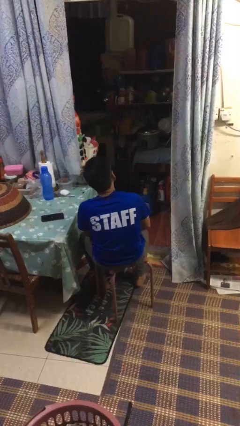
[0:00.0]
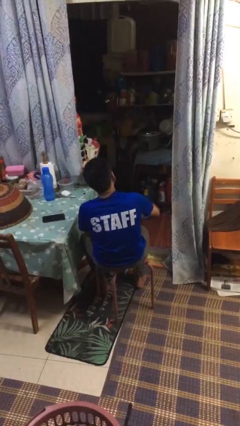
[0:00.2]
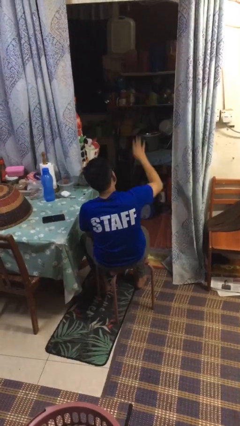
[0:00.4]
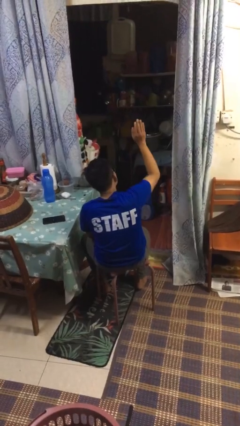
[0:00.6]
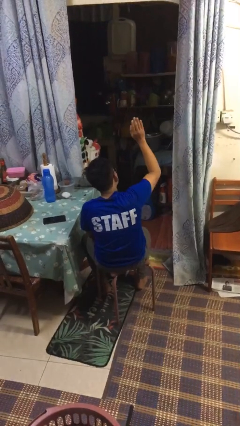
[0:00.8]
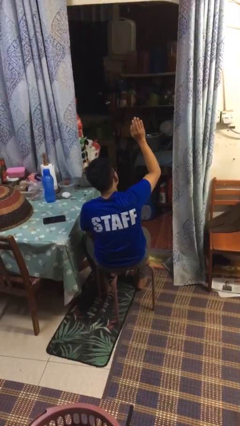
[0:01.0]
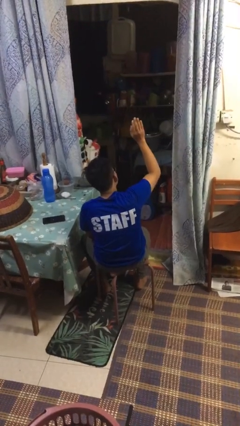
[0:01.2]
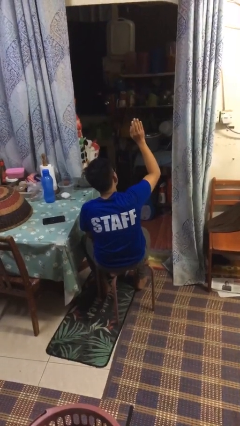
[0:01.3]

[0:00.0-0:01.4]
person gestures swipe up

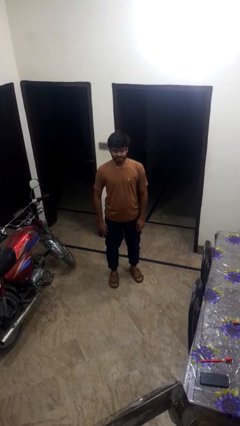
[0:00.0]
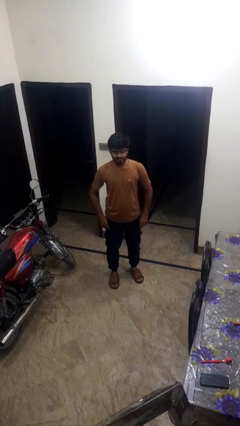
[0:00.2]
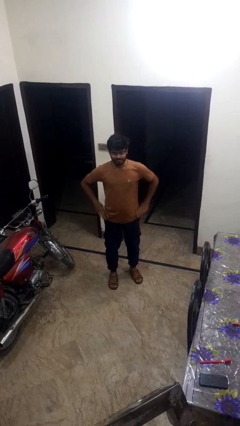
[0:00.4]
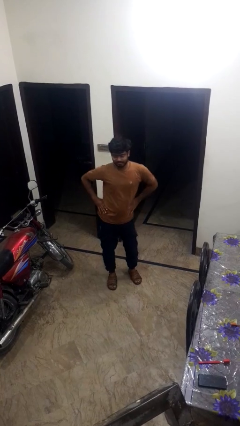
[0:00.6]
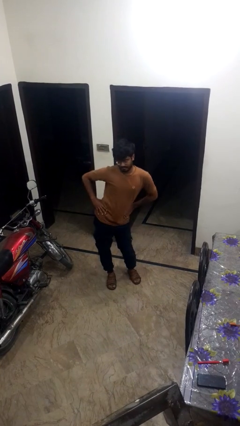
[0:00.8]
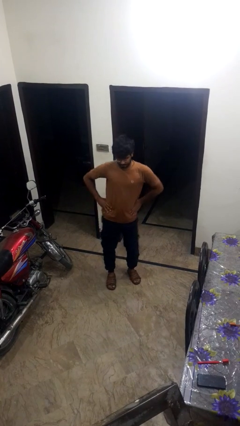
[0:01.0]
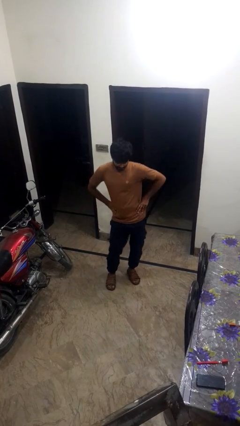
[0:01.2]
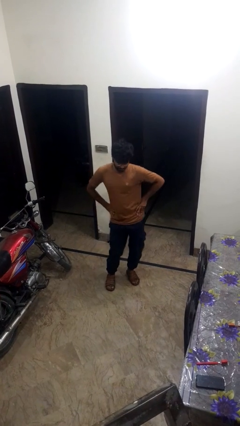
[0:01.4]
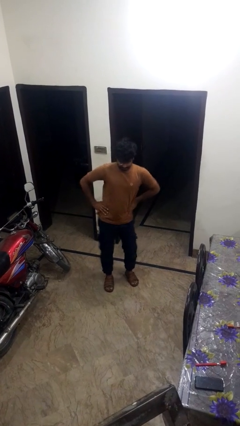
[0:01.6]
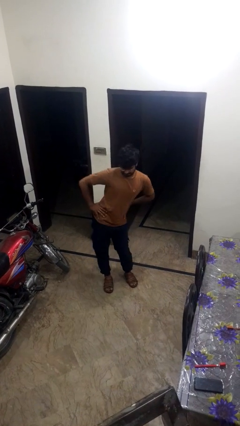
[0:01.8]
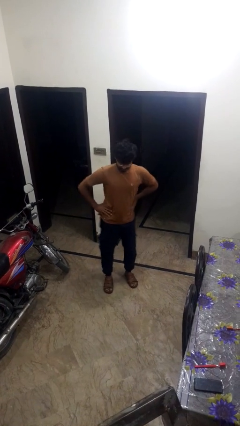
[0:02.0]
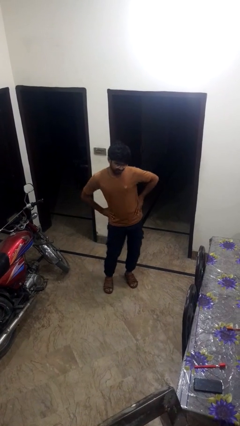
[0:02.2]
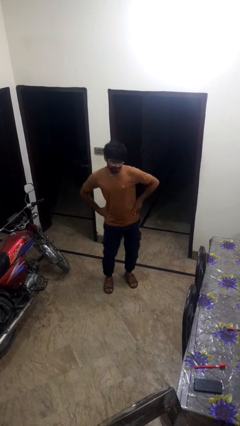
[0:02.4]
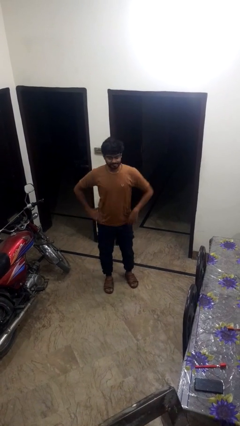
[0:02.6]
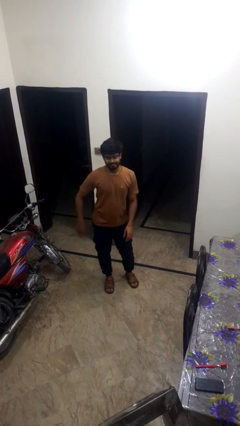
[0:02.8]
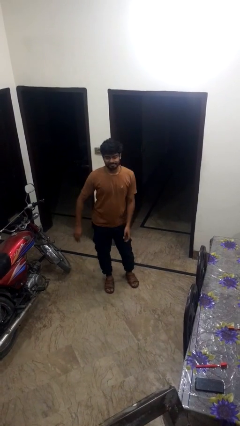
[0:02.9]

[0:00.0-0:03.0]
person wiggles hips

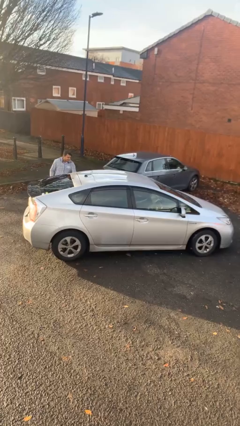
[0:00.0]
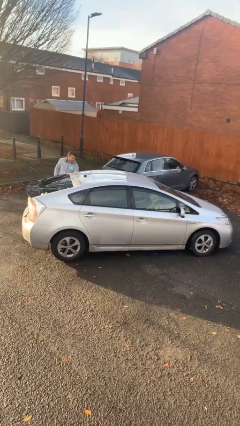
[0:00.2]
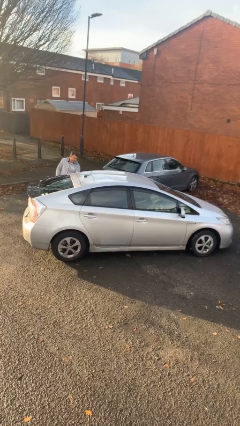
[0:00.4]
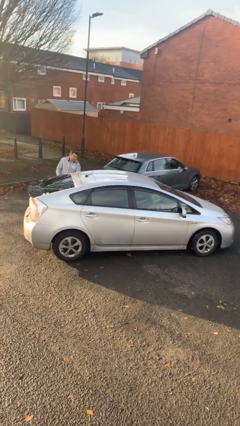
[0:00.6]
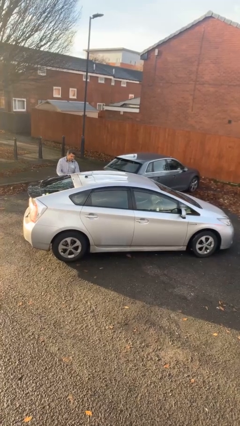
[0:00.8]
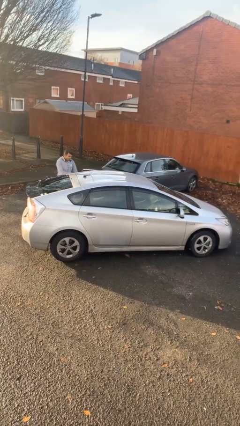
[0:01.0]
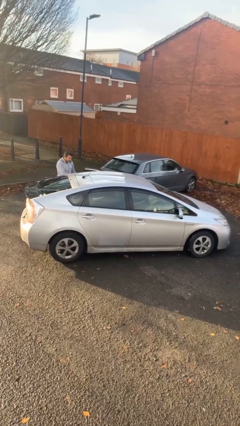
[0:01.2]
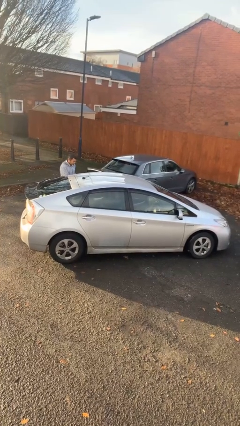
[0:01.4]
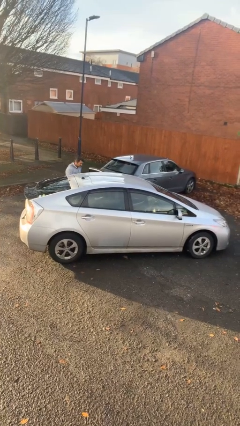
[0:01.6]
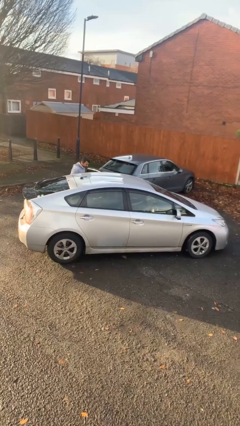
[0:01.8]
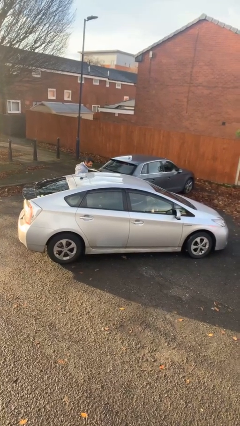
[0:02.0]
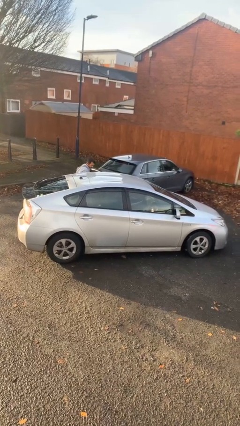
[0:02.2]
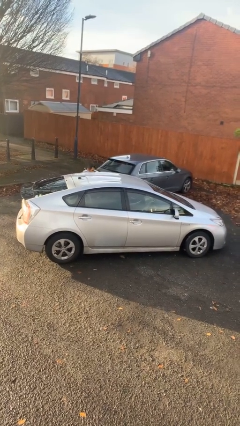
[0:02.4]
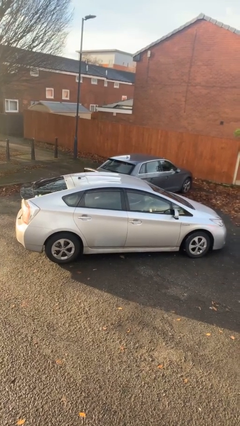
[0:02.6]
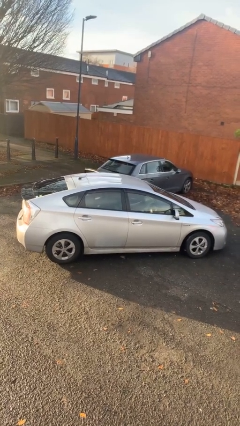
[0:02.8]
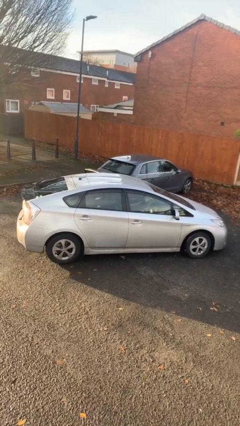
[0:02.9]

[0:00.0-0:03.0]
car picks up person

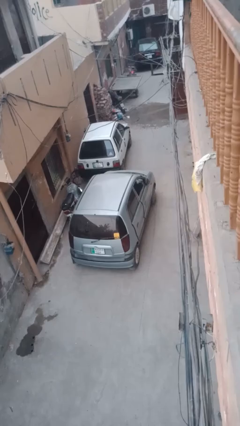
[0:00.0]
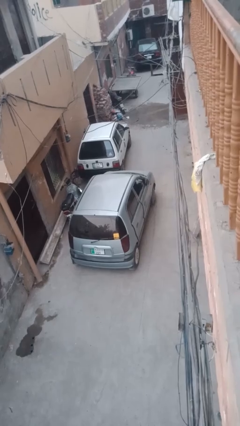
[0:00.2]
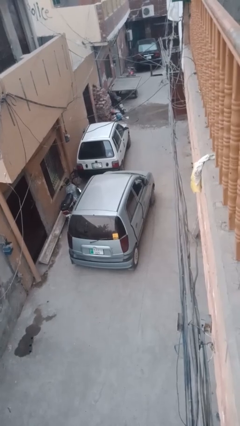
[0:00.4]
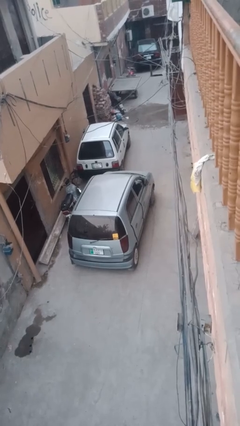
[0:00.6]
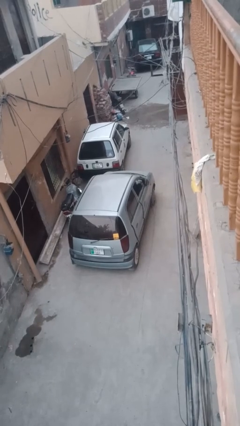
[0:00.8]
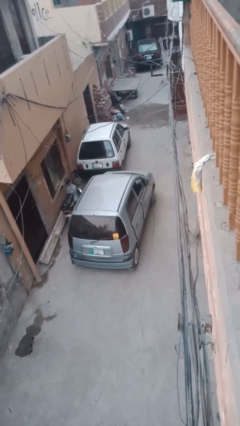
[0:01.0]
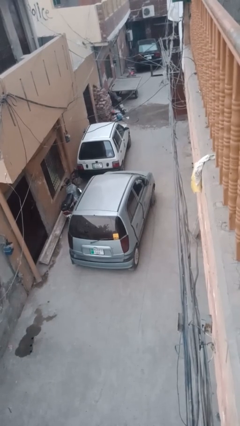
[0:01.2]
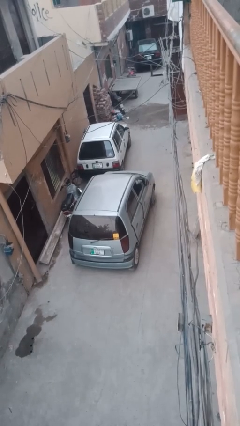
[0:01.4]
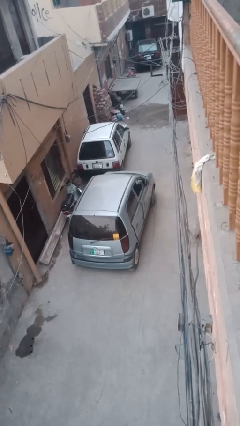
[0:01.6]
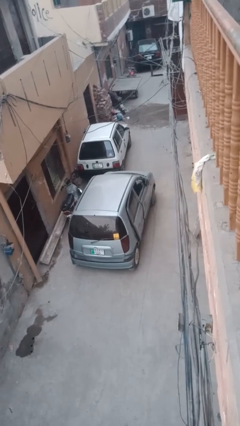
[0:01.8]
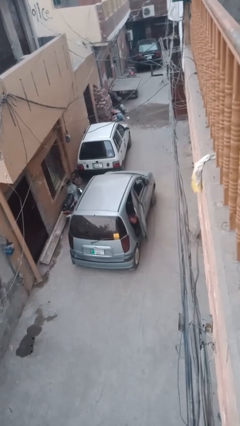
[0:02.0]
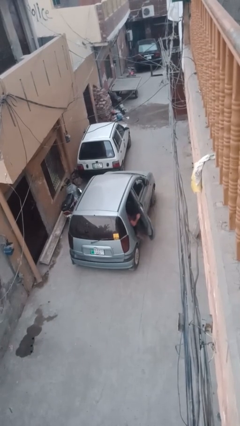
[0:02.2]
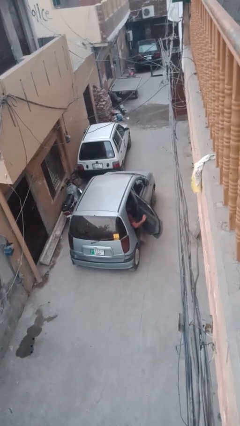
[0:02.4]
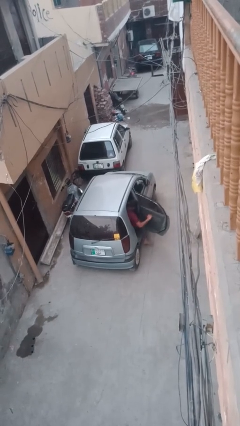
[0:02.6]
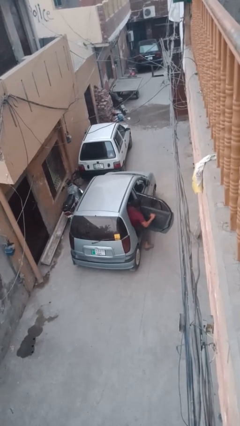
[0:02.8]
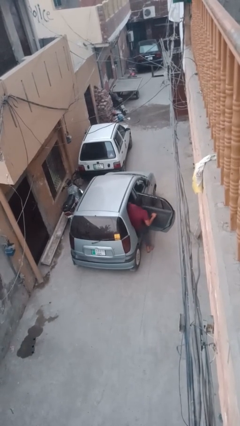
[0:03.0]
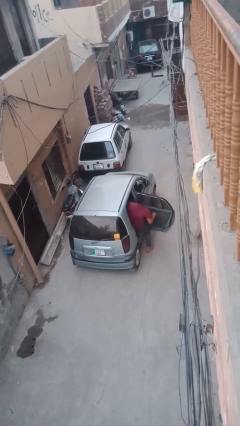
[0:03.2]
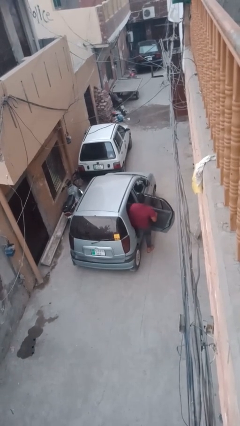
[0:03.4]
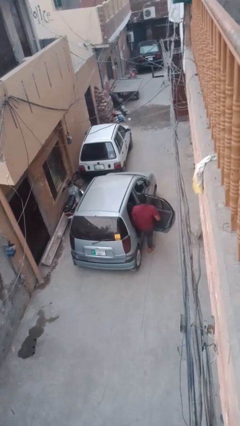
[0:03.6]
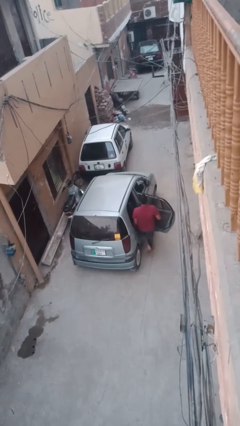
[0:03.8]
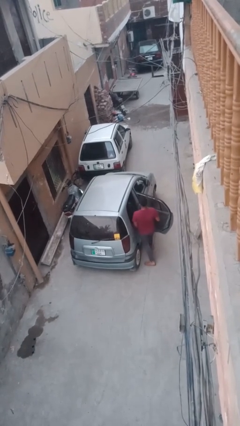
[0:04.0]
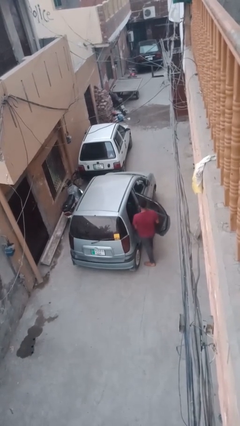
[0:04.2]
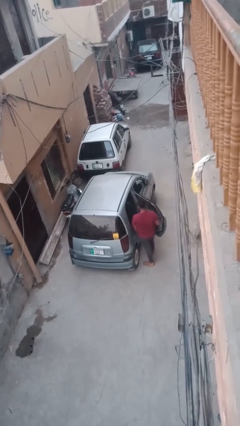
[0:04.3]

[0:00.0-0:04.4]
car drops off person

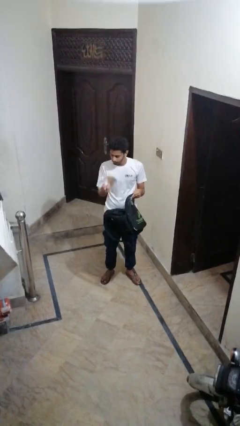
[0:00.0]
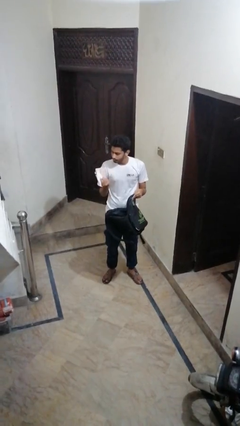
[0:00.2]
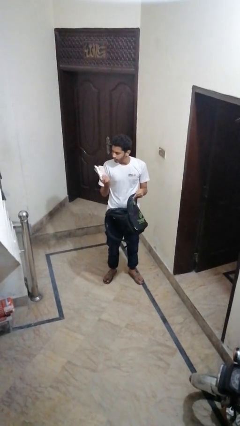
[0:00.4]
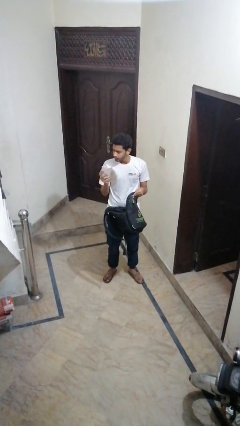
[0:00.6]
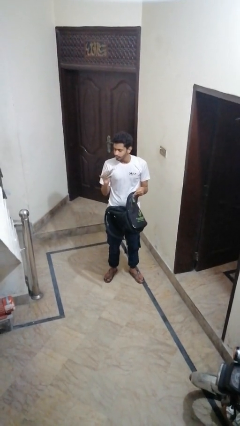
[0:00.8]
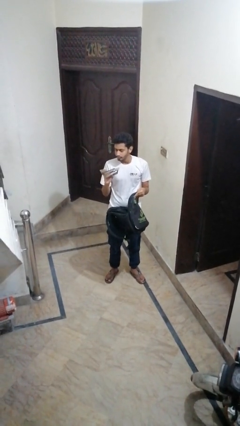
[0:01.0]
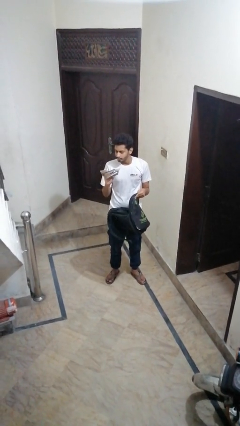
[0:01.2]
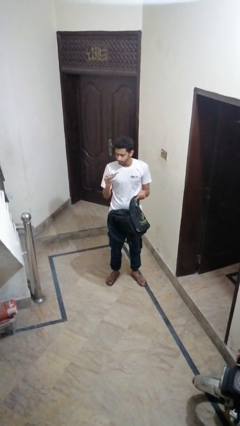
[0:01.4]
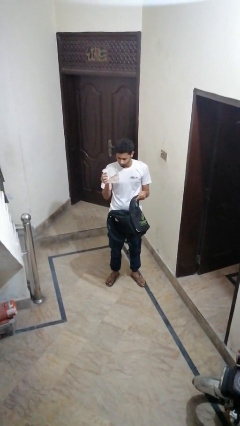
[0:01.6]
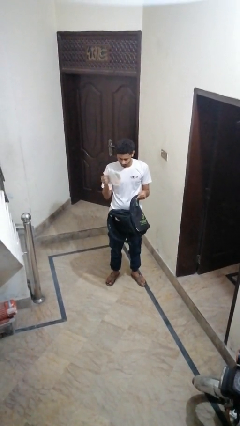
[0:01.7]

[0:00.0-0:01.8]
person takes object from backpack

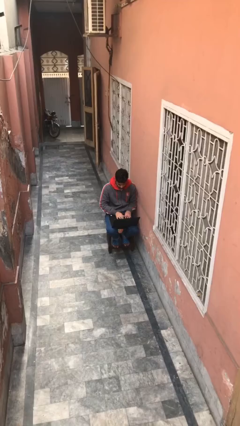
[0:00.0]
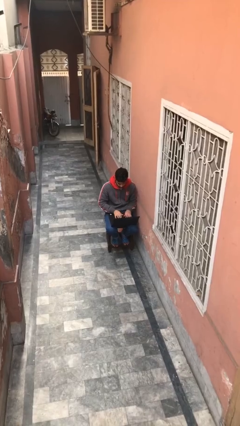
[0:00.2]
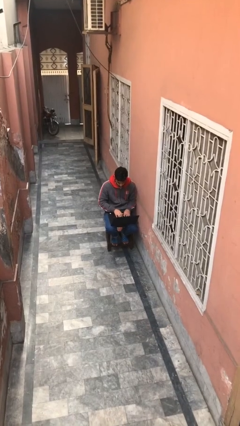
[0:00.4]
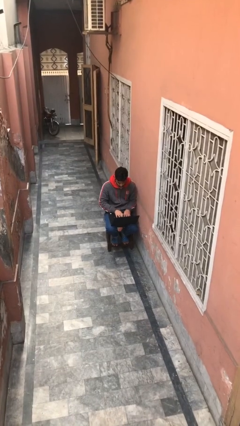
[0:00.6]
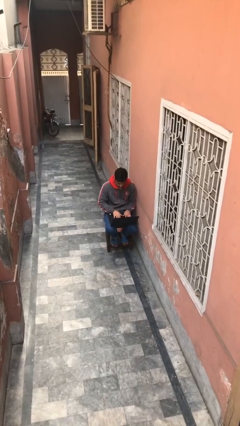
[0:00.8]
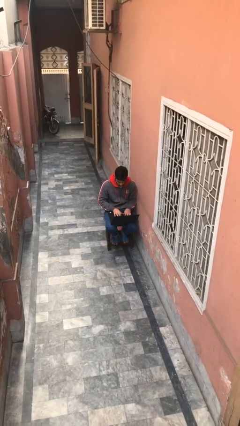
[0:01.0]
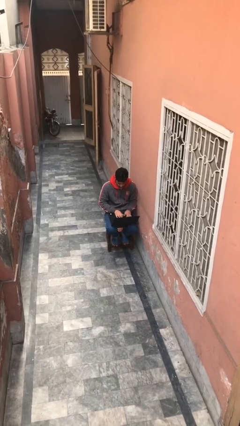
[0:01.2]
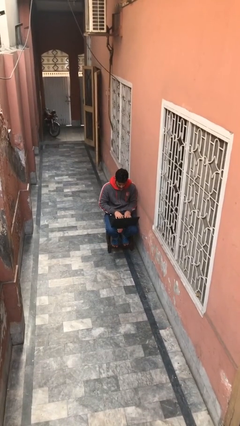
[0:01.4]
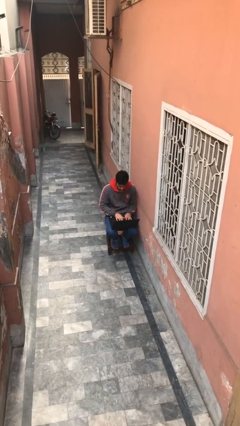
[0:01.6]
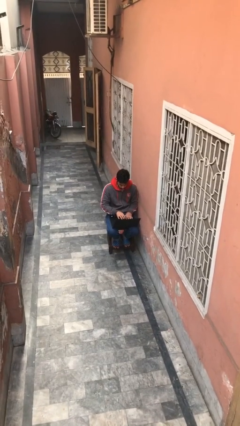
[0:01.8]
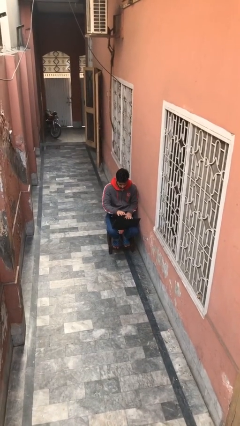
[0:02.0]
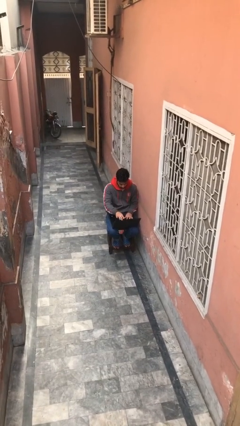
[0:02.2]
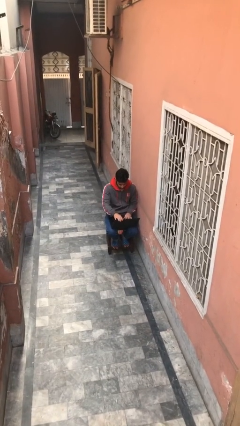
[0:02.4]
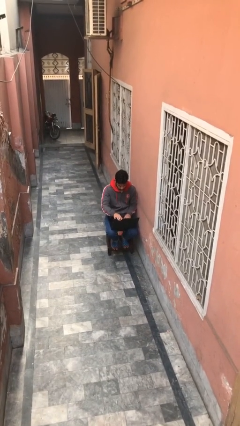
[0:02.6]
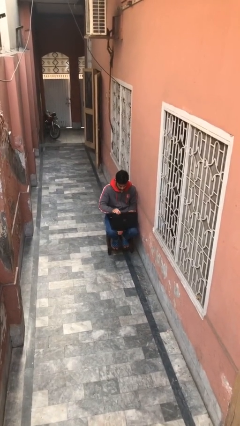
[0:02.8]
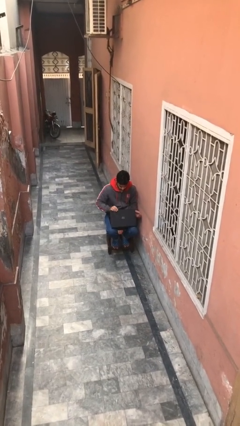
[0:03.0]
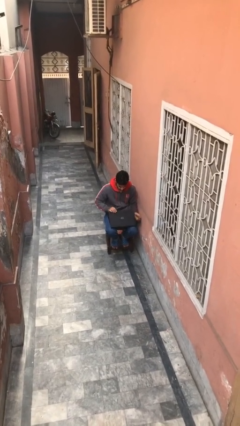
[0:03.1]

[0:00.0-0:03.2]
person interacts with laptop

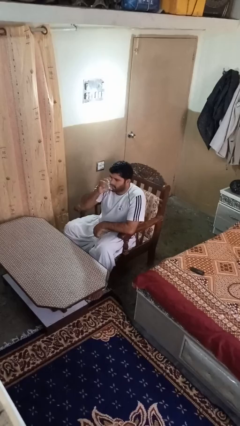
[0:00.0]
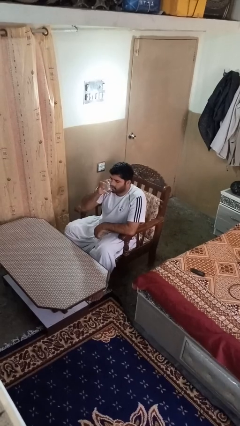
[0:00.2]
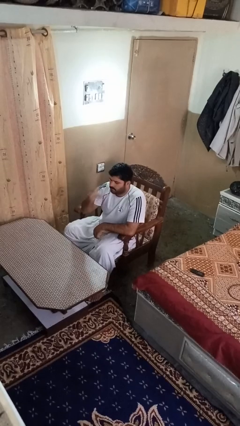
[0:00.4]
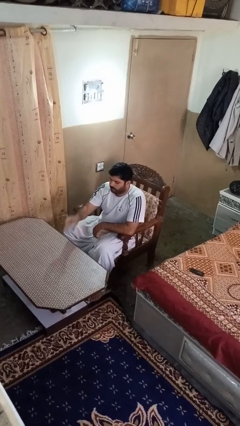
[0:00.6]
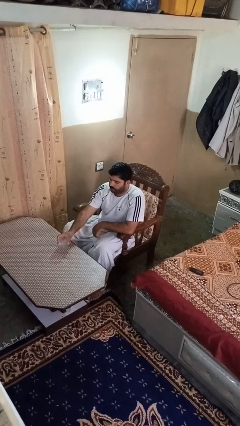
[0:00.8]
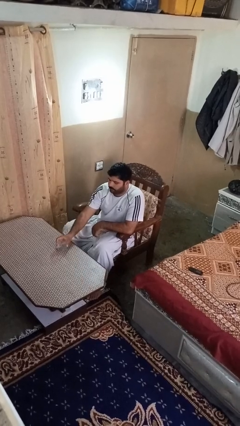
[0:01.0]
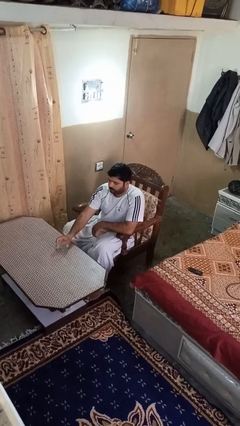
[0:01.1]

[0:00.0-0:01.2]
person puts down object on table
